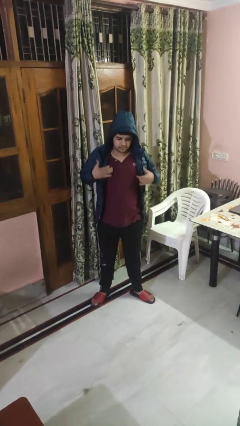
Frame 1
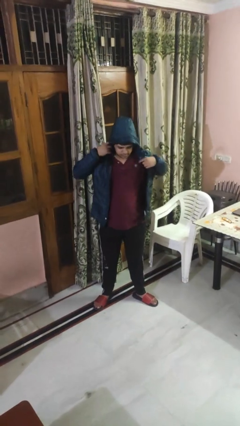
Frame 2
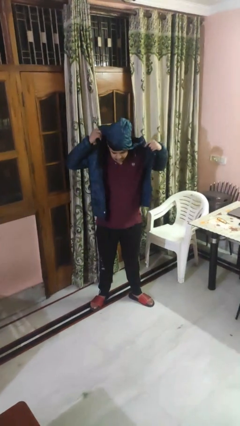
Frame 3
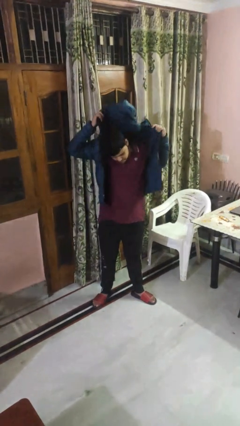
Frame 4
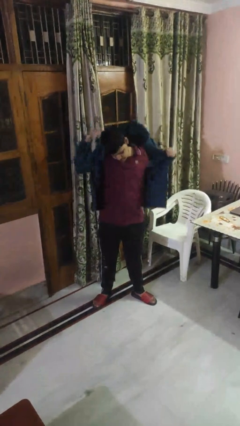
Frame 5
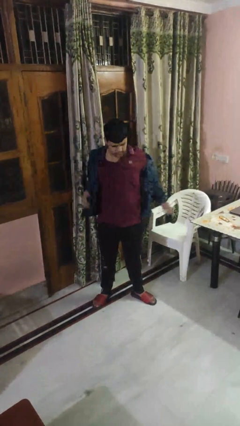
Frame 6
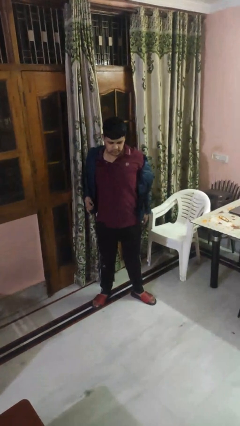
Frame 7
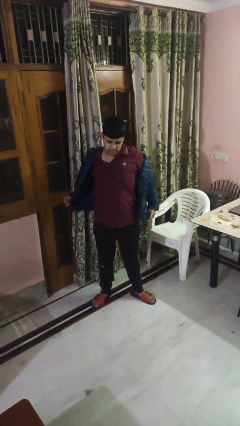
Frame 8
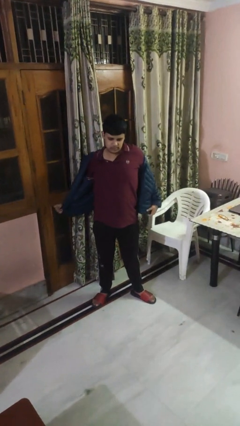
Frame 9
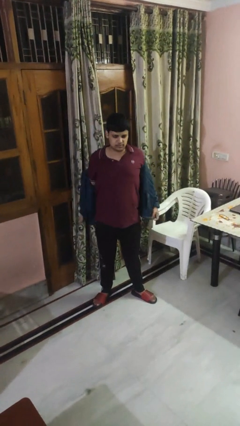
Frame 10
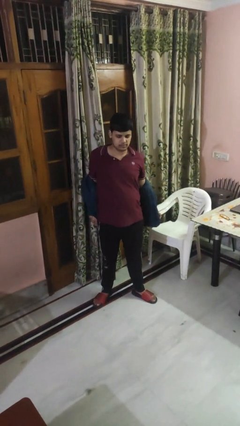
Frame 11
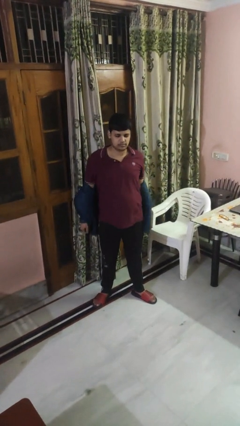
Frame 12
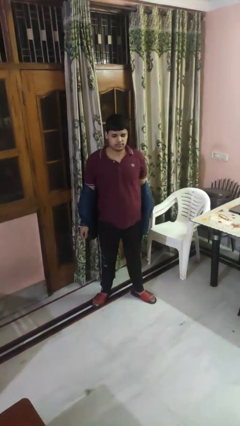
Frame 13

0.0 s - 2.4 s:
person takes off hoodie

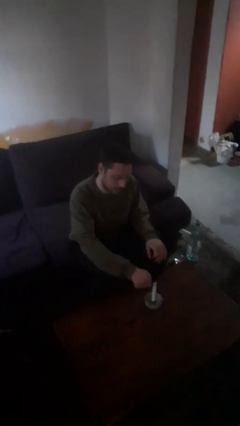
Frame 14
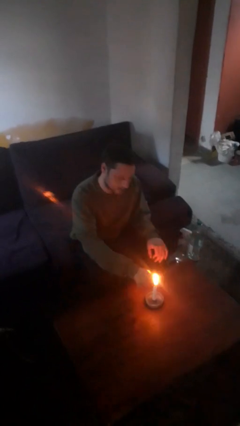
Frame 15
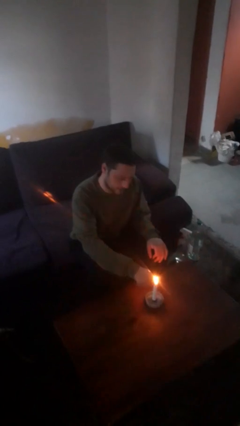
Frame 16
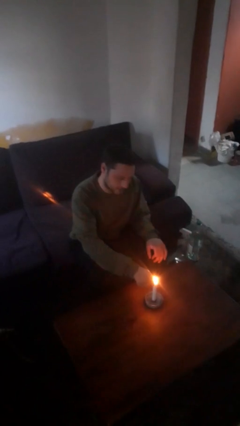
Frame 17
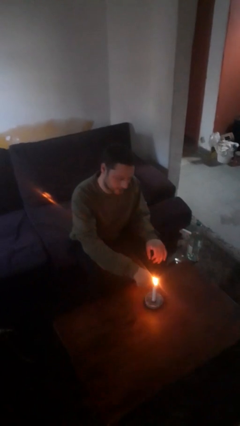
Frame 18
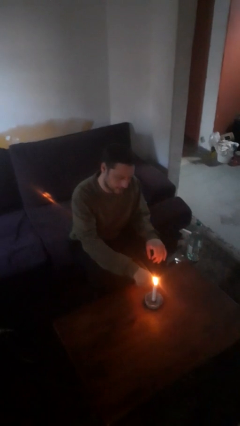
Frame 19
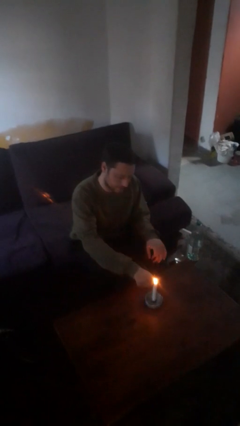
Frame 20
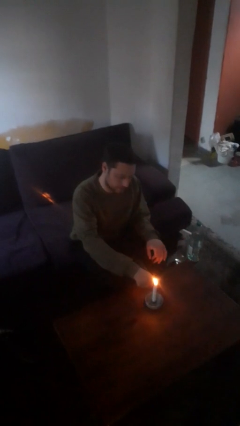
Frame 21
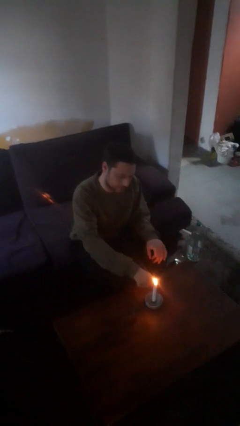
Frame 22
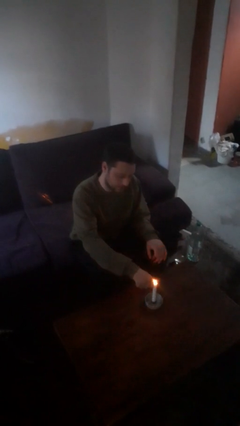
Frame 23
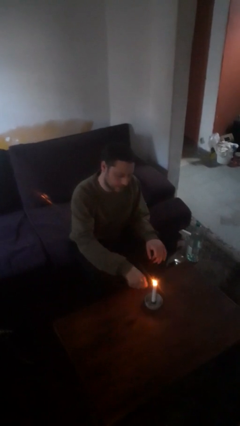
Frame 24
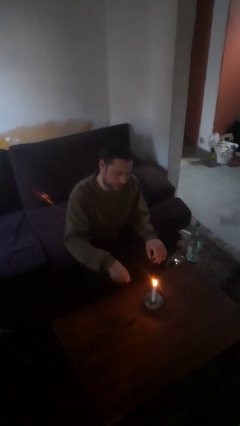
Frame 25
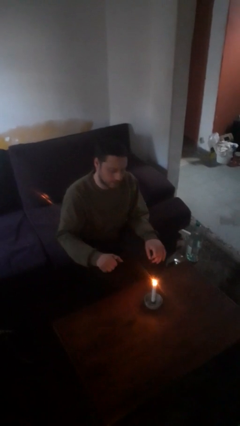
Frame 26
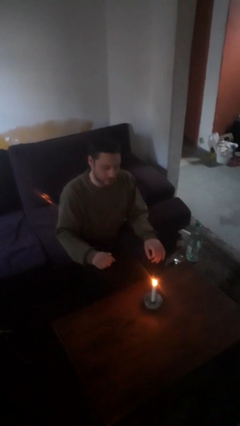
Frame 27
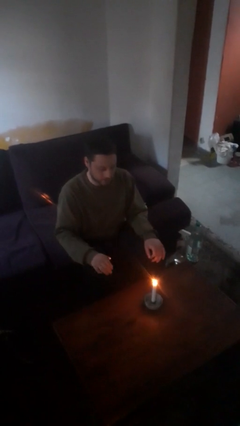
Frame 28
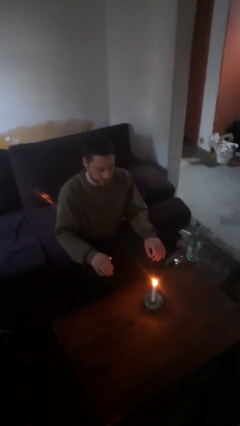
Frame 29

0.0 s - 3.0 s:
person lights candle

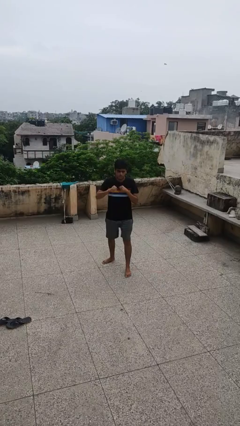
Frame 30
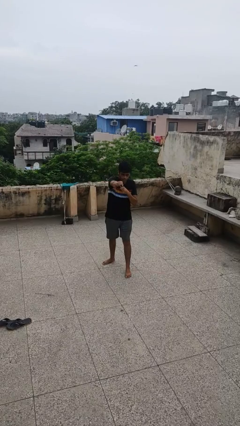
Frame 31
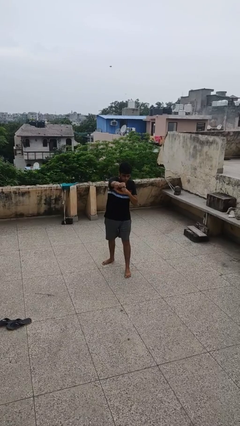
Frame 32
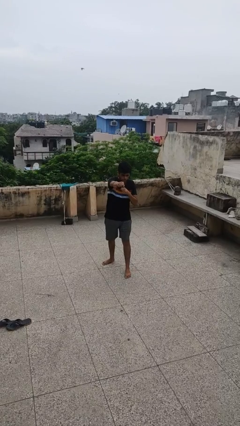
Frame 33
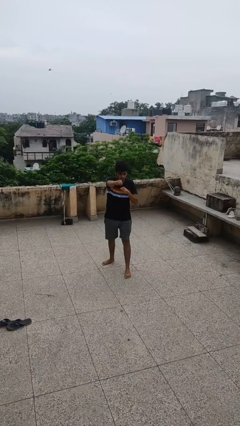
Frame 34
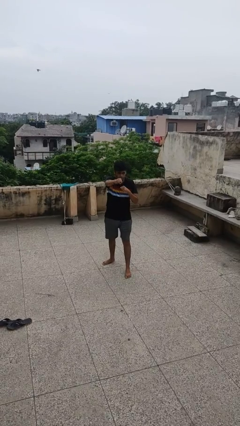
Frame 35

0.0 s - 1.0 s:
person punches

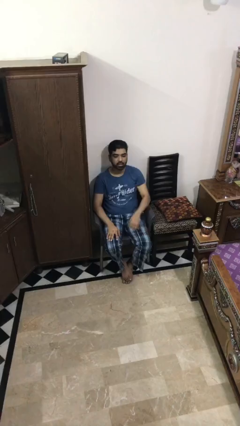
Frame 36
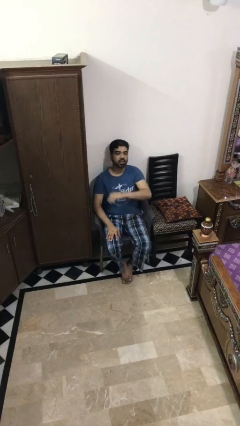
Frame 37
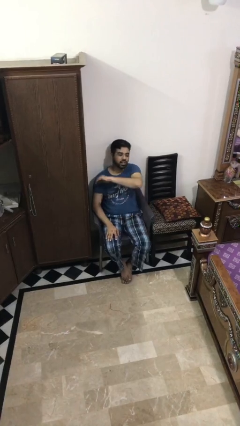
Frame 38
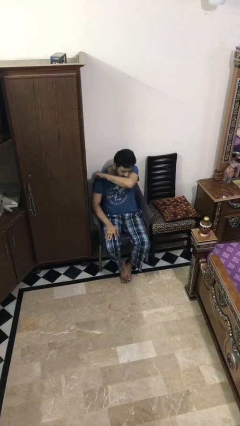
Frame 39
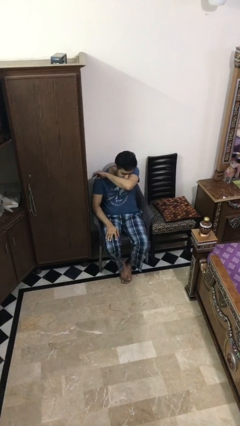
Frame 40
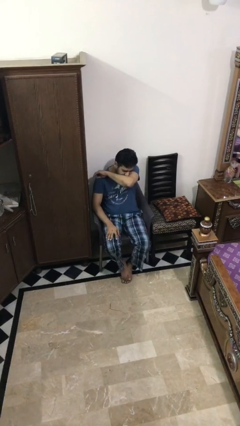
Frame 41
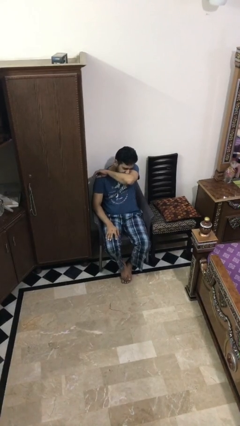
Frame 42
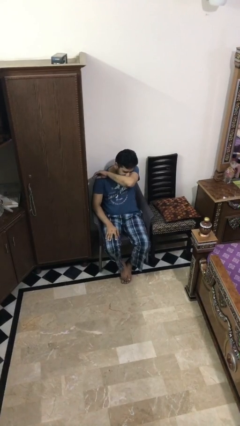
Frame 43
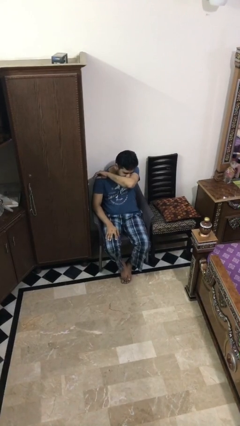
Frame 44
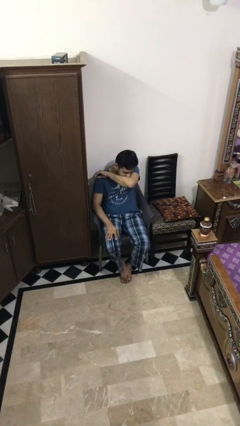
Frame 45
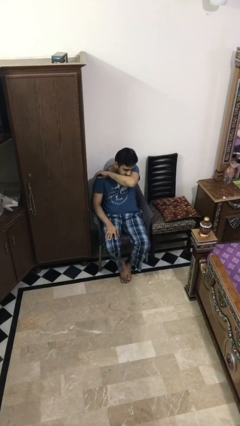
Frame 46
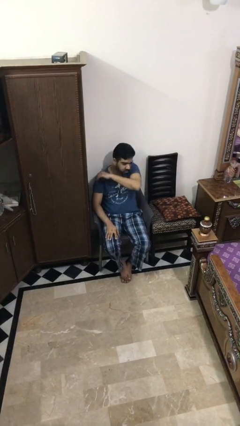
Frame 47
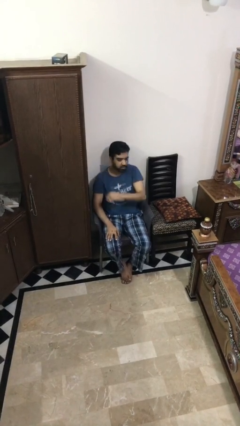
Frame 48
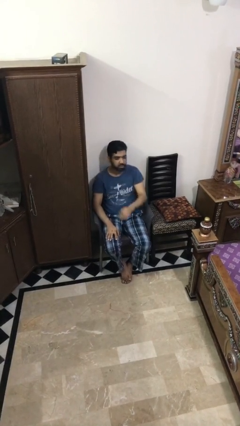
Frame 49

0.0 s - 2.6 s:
person sneezes into arm

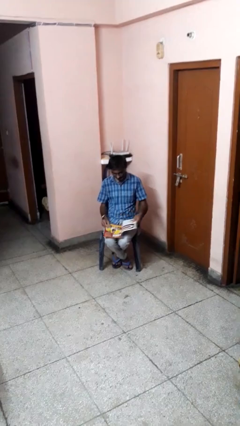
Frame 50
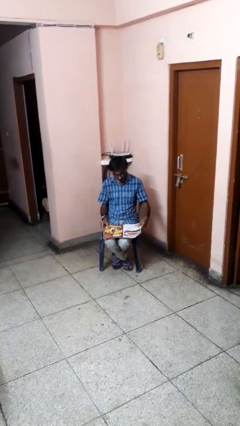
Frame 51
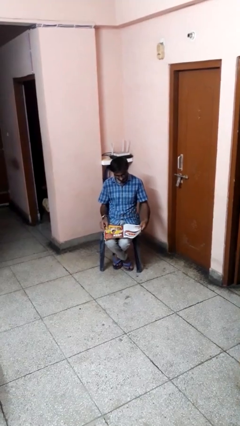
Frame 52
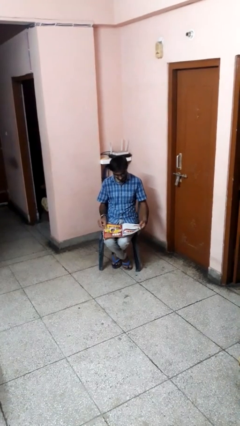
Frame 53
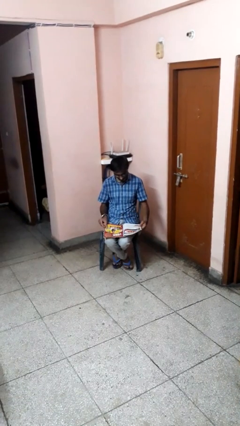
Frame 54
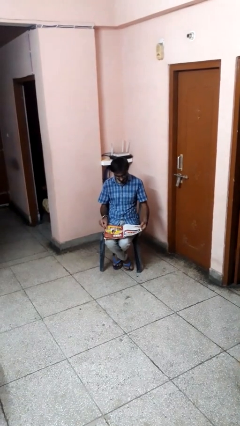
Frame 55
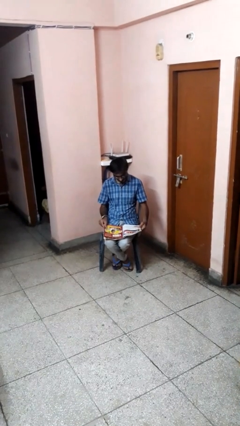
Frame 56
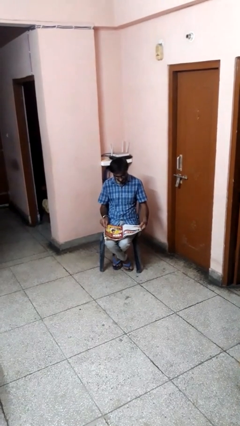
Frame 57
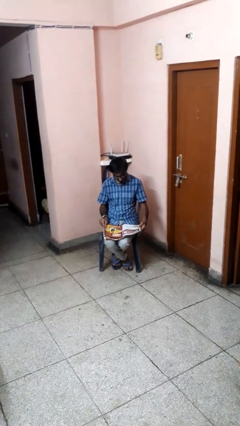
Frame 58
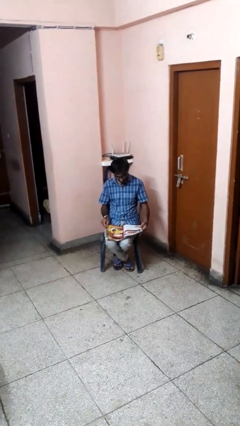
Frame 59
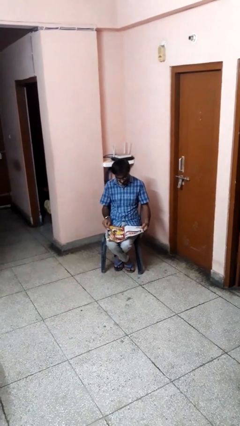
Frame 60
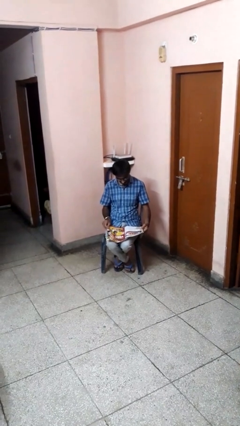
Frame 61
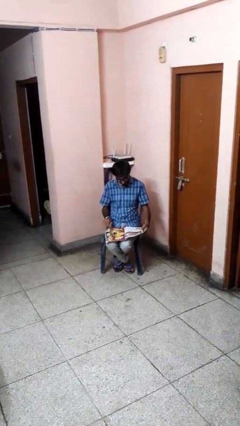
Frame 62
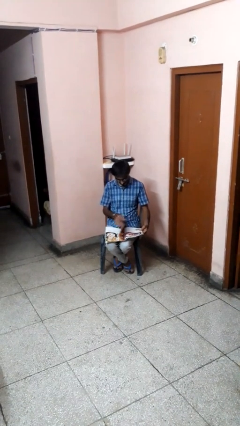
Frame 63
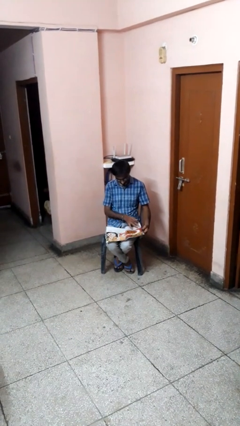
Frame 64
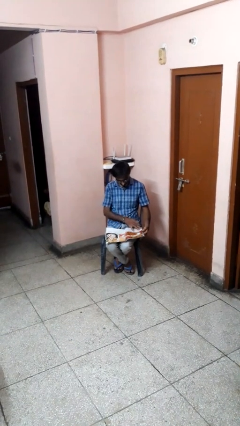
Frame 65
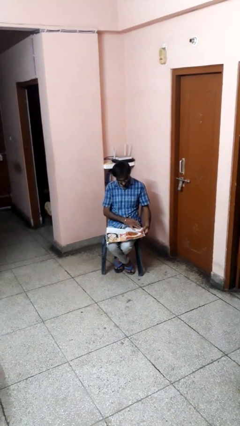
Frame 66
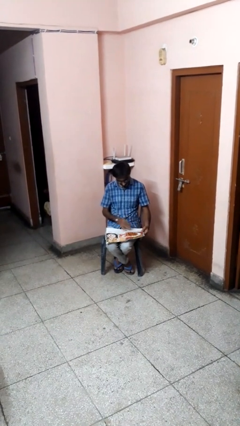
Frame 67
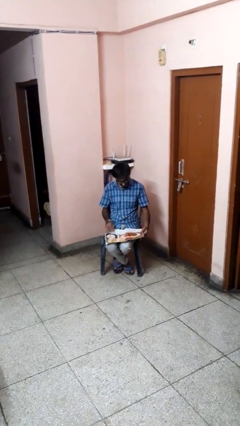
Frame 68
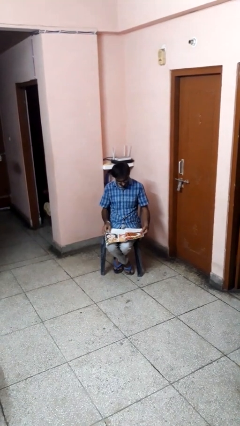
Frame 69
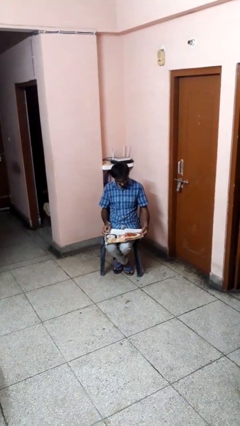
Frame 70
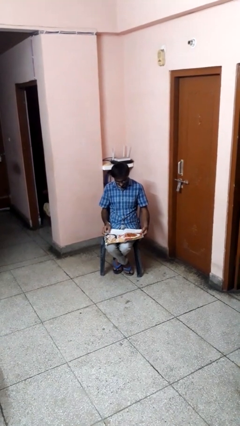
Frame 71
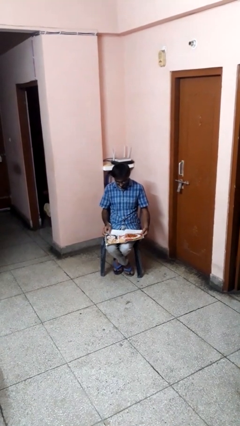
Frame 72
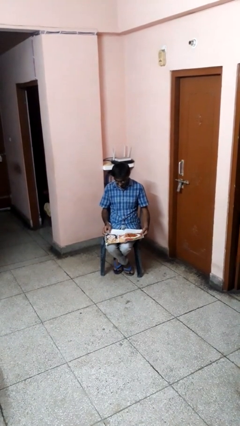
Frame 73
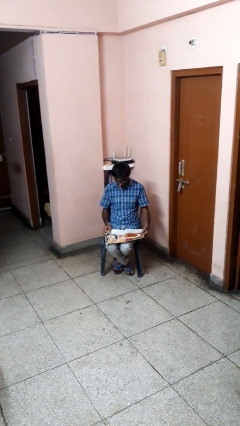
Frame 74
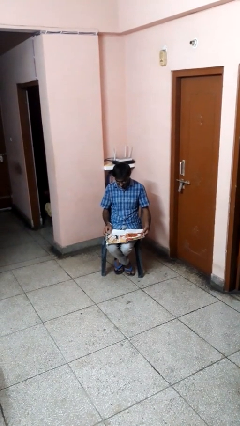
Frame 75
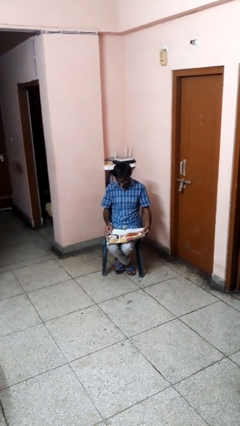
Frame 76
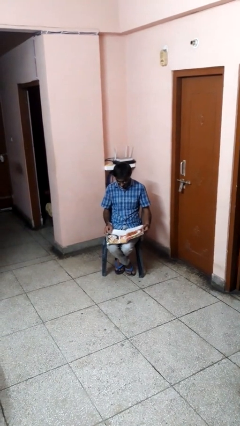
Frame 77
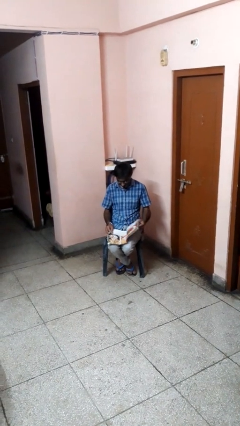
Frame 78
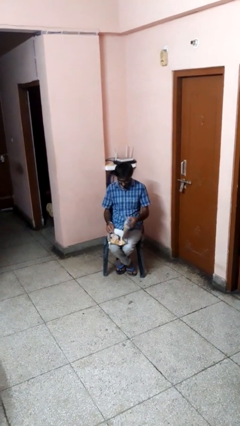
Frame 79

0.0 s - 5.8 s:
person reads magazine

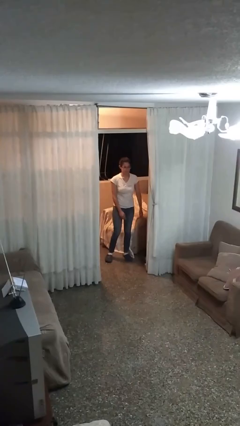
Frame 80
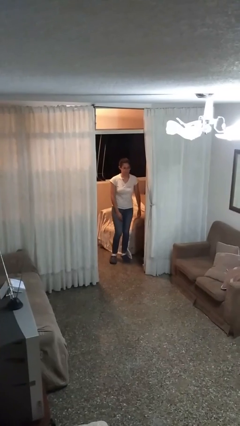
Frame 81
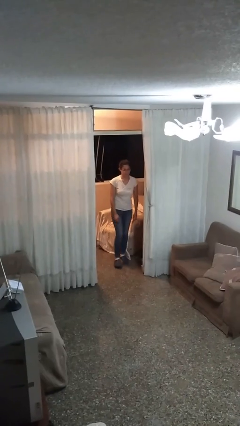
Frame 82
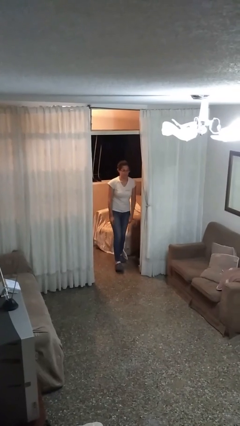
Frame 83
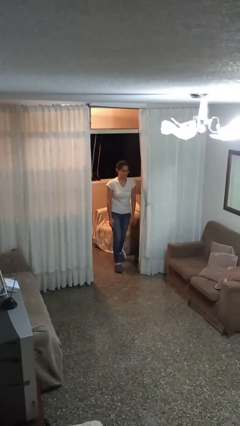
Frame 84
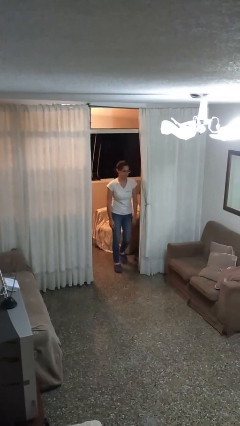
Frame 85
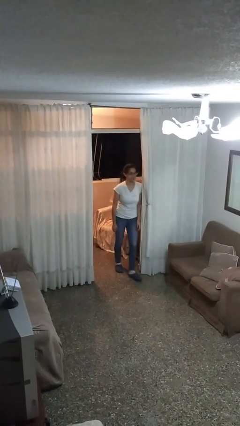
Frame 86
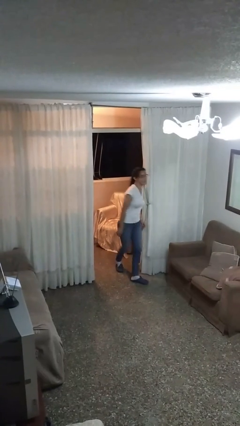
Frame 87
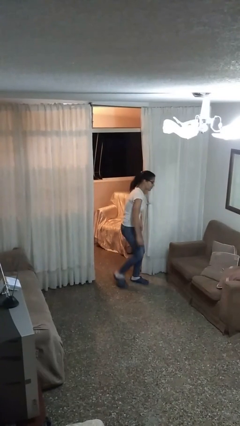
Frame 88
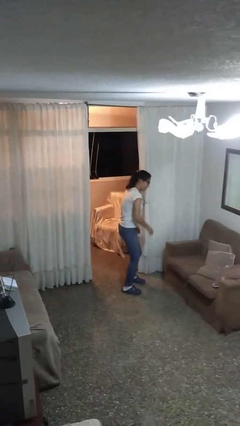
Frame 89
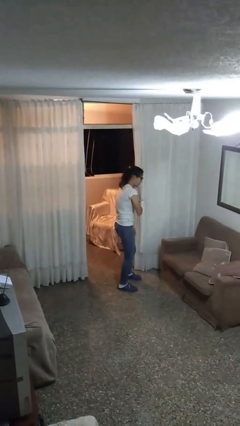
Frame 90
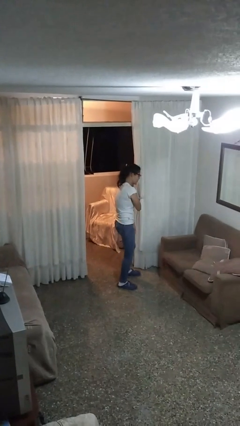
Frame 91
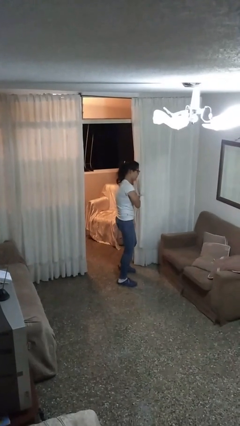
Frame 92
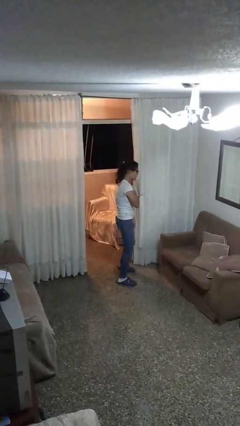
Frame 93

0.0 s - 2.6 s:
person bumps into wall

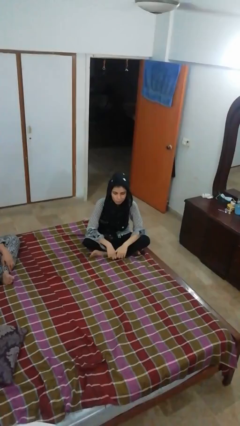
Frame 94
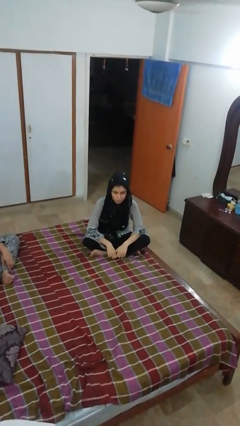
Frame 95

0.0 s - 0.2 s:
person puts fingers in ear
